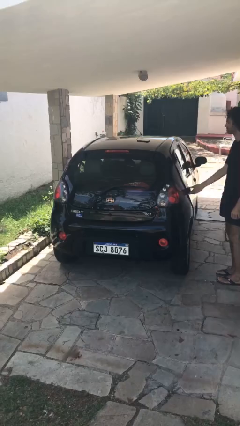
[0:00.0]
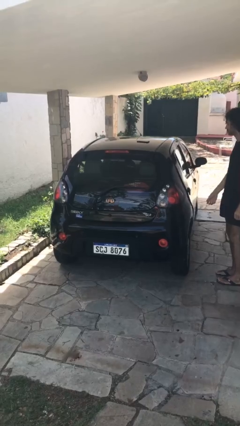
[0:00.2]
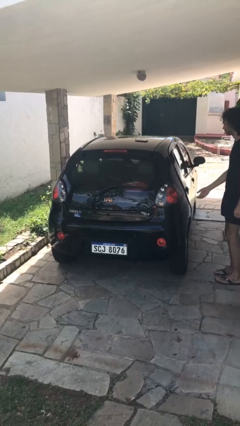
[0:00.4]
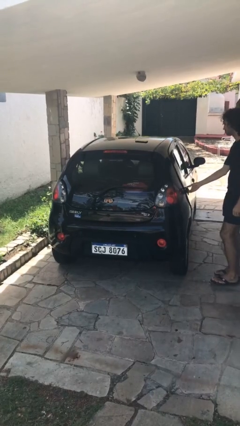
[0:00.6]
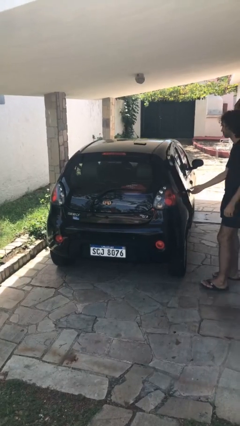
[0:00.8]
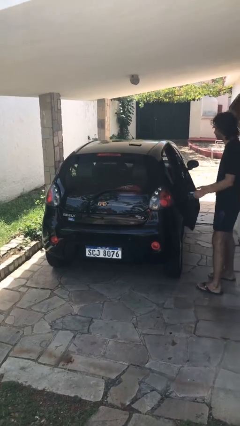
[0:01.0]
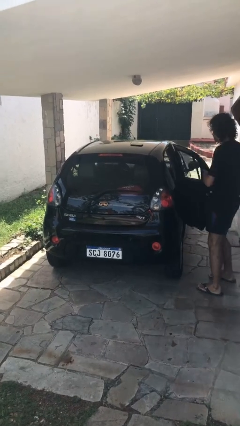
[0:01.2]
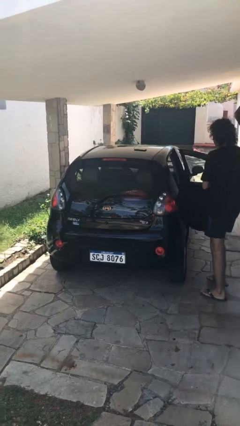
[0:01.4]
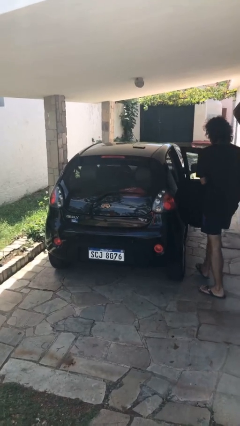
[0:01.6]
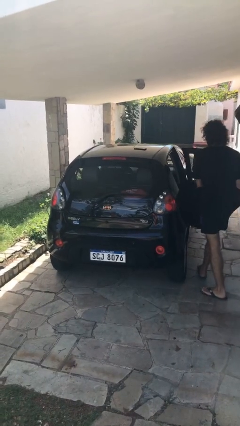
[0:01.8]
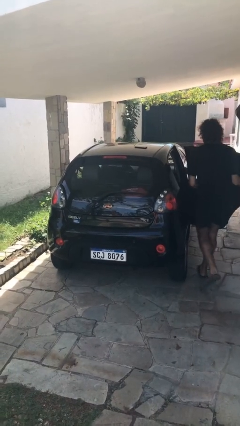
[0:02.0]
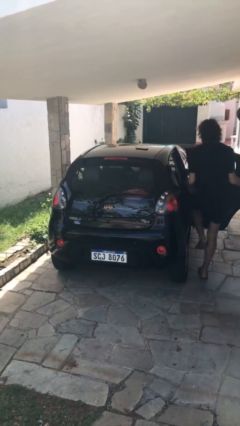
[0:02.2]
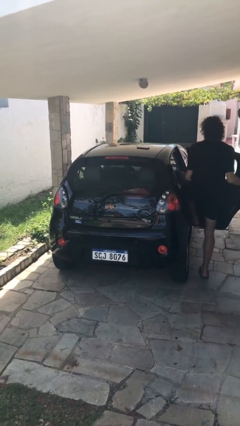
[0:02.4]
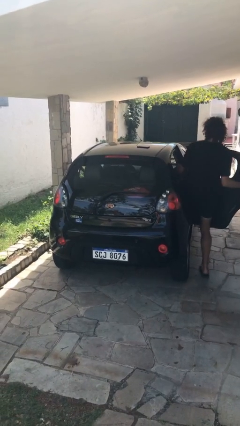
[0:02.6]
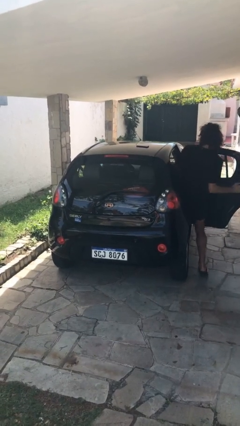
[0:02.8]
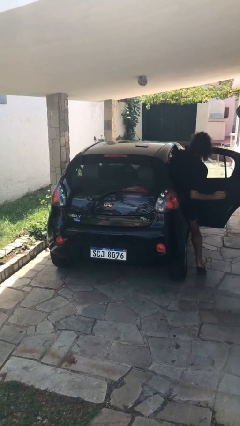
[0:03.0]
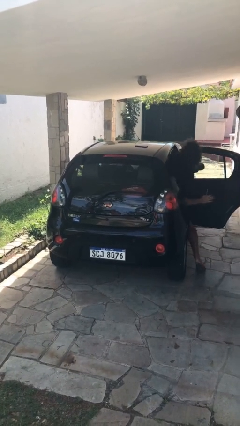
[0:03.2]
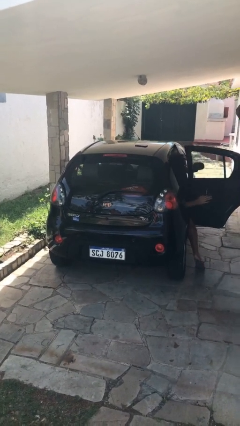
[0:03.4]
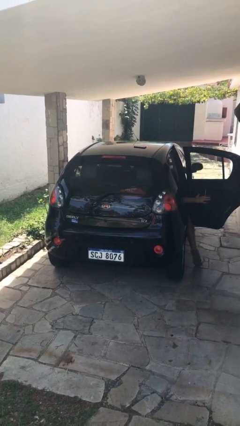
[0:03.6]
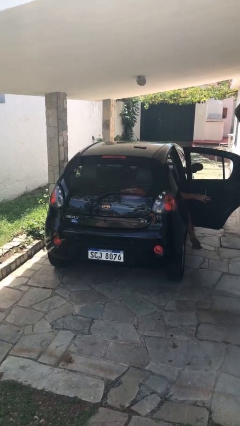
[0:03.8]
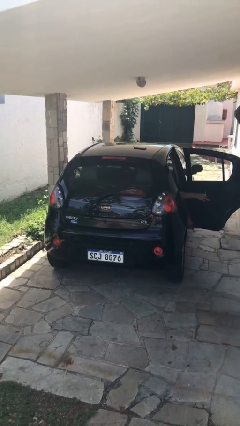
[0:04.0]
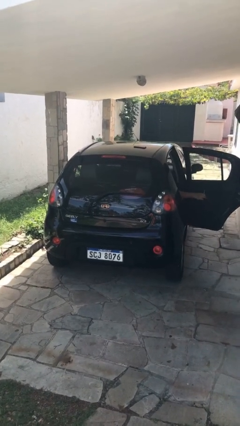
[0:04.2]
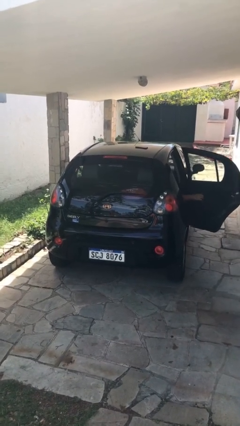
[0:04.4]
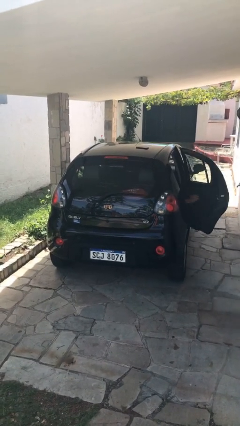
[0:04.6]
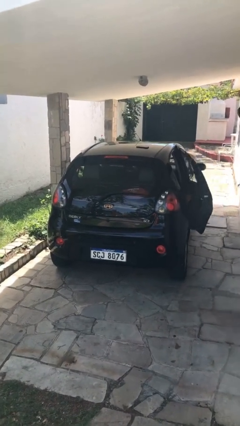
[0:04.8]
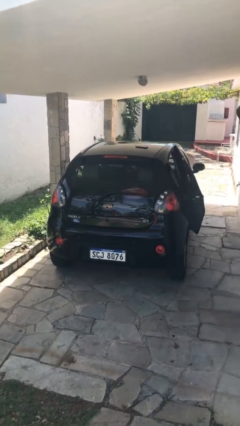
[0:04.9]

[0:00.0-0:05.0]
car picks up person

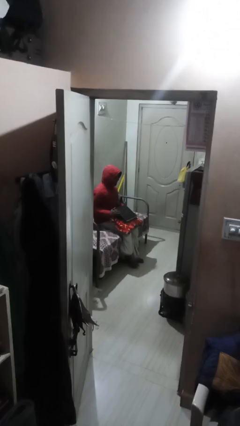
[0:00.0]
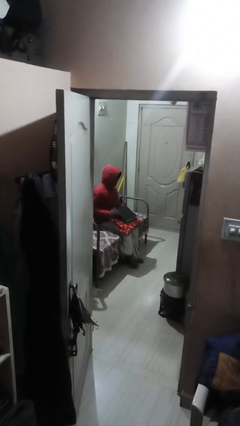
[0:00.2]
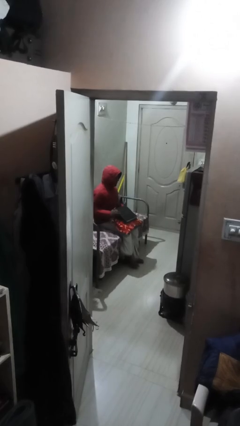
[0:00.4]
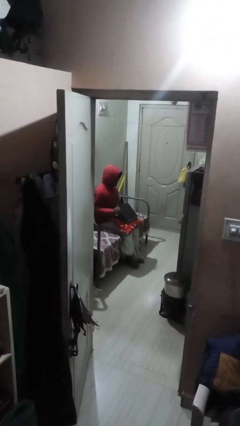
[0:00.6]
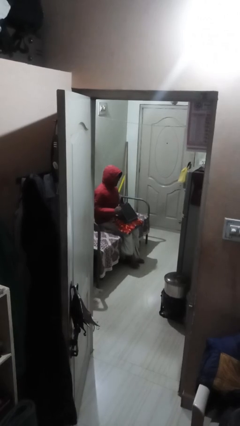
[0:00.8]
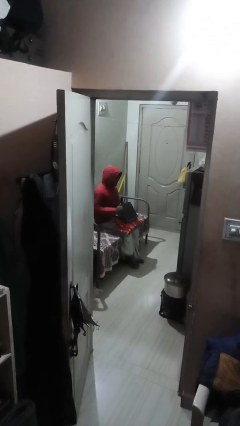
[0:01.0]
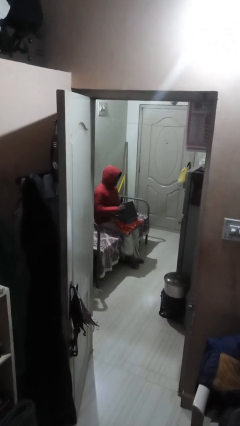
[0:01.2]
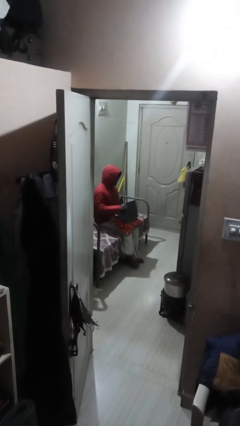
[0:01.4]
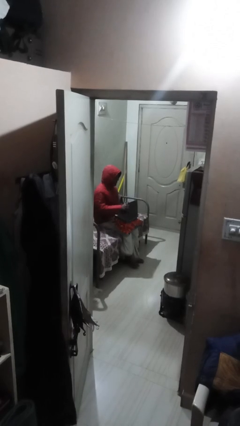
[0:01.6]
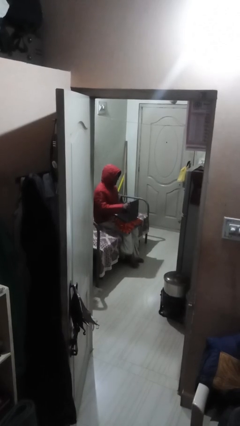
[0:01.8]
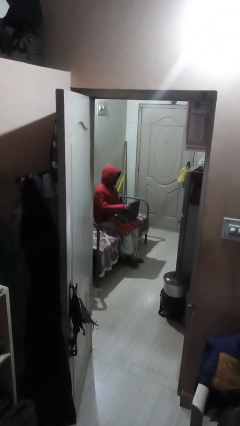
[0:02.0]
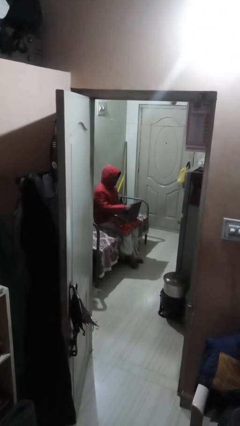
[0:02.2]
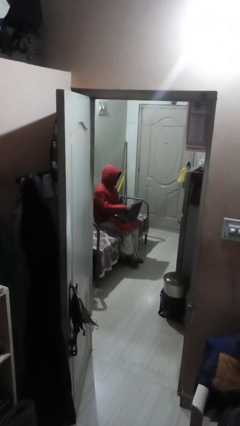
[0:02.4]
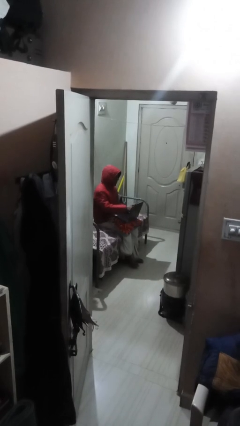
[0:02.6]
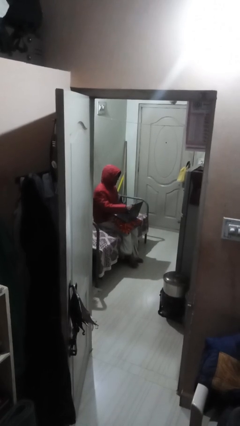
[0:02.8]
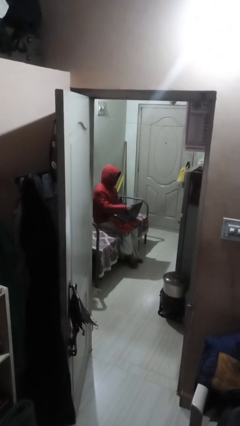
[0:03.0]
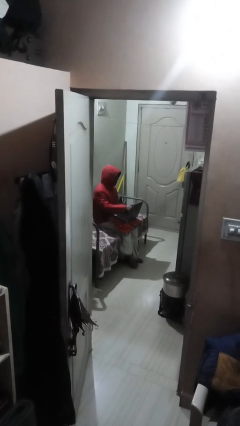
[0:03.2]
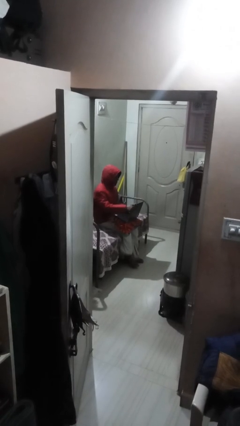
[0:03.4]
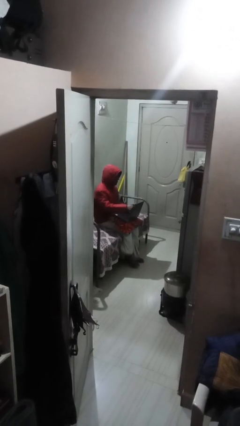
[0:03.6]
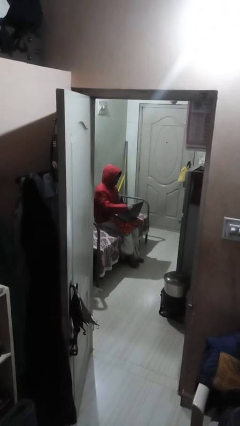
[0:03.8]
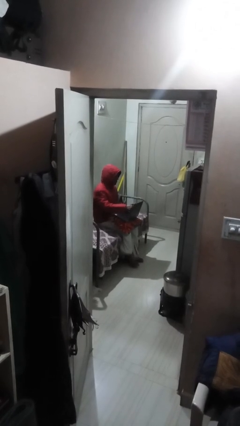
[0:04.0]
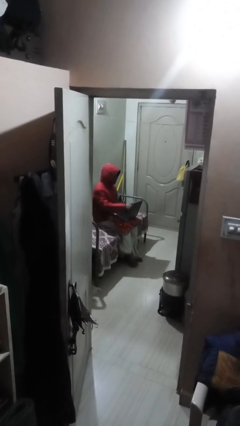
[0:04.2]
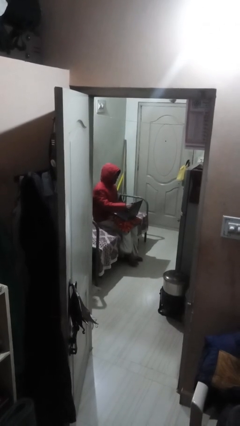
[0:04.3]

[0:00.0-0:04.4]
person interacts with laptop

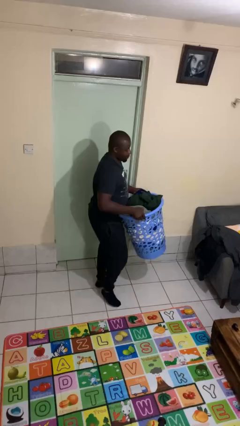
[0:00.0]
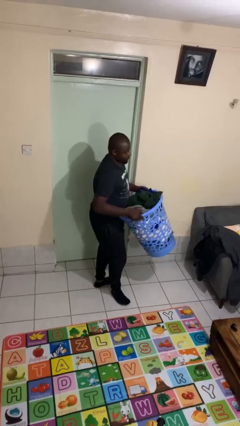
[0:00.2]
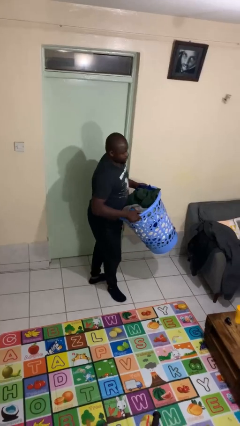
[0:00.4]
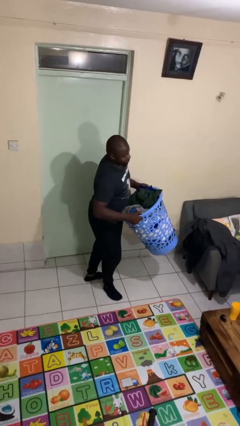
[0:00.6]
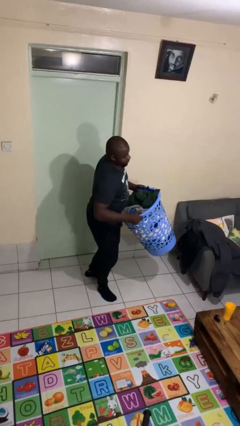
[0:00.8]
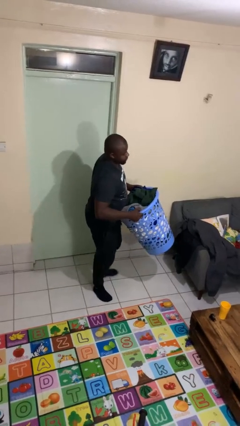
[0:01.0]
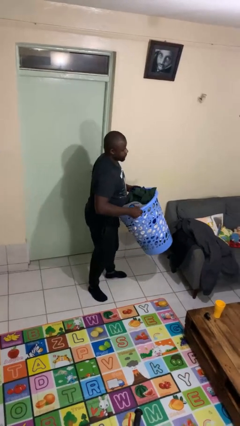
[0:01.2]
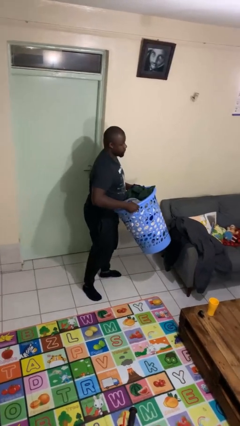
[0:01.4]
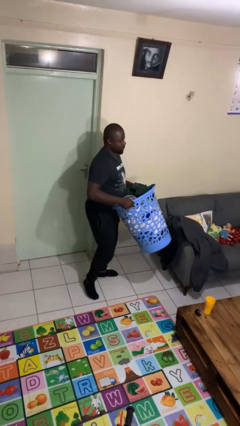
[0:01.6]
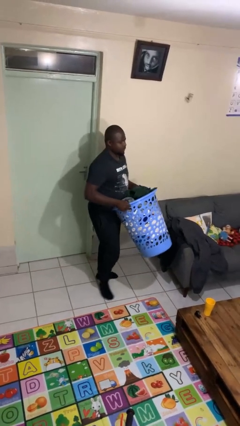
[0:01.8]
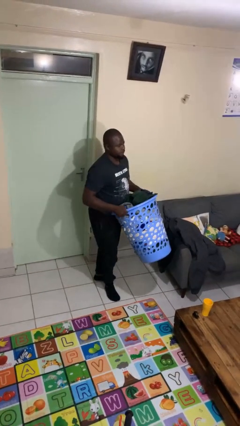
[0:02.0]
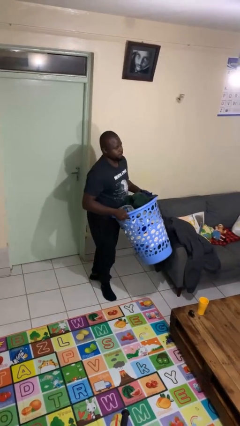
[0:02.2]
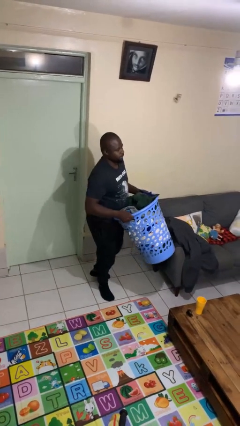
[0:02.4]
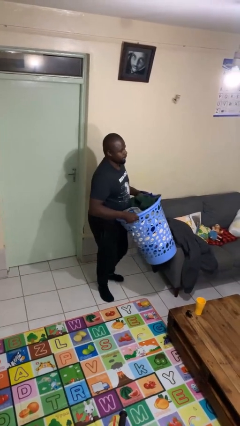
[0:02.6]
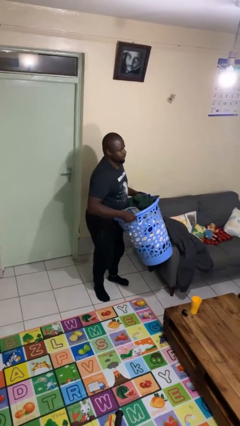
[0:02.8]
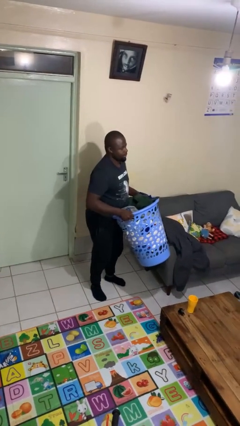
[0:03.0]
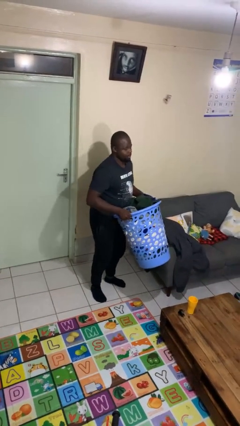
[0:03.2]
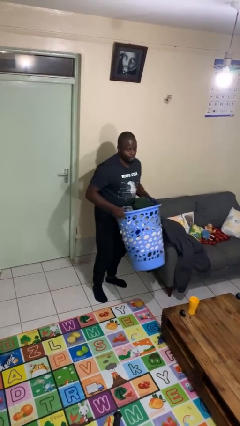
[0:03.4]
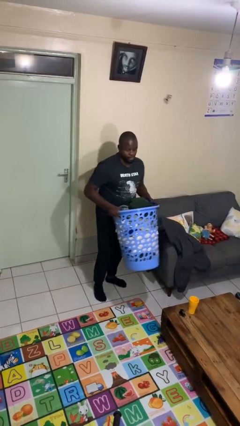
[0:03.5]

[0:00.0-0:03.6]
person carries laundry basket

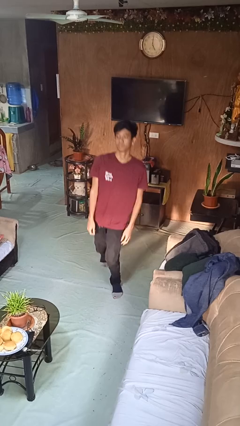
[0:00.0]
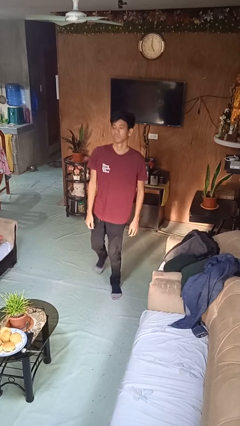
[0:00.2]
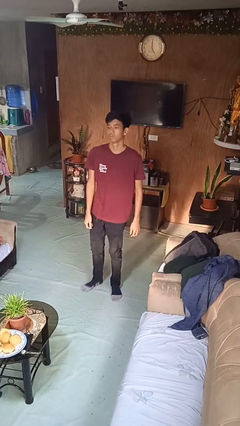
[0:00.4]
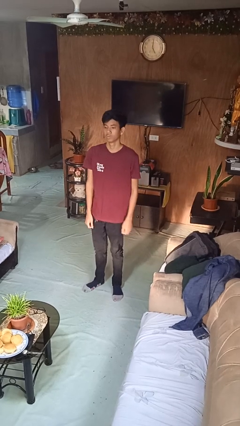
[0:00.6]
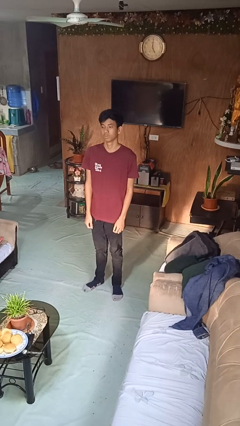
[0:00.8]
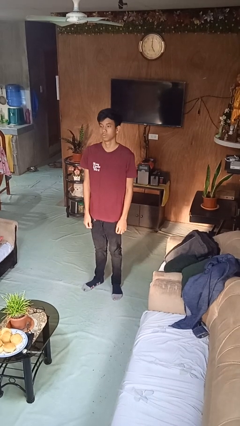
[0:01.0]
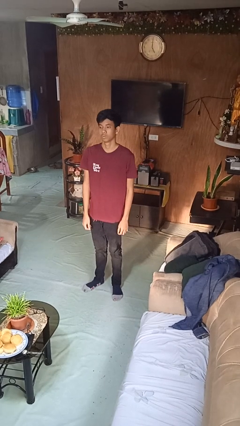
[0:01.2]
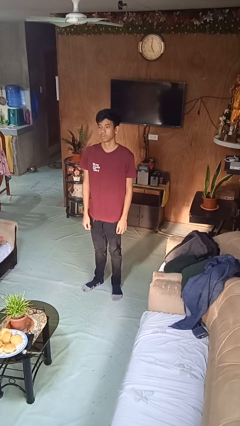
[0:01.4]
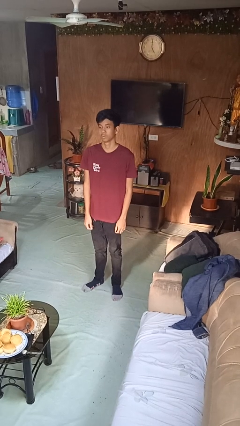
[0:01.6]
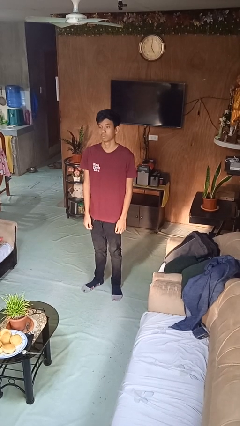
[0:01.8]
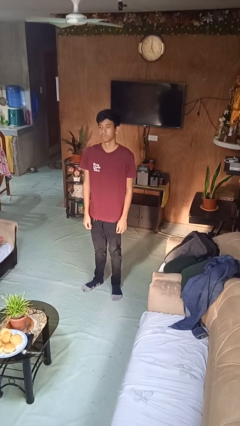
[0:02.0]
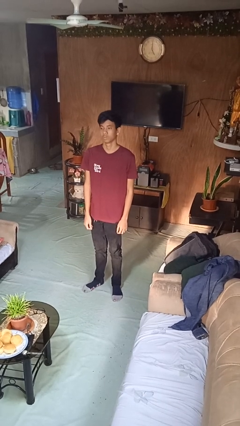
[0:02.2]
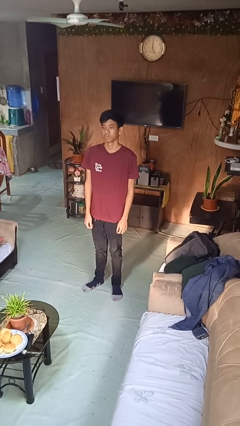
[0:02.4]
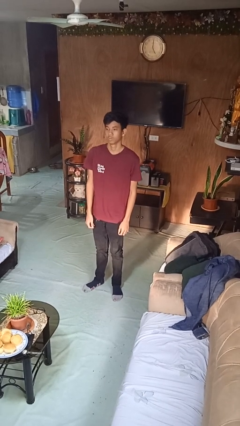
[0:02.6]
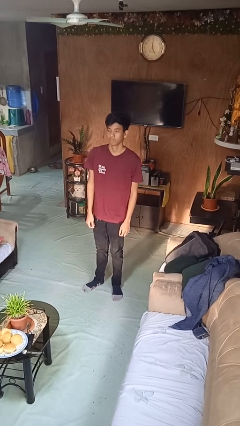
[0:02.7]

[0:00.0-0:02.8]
person stands up from floor

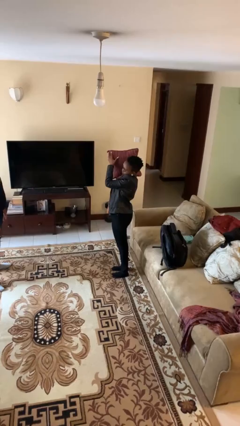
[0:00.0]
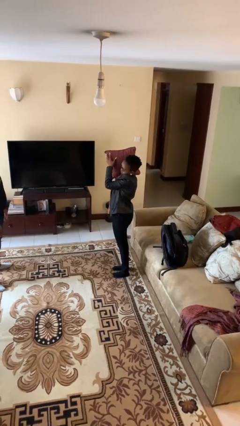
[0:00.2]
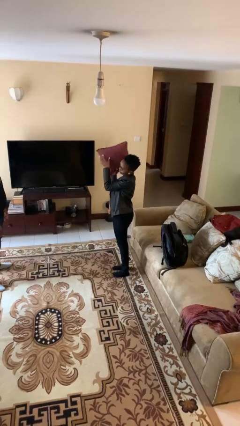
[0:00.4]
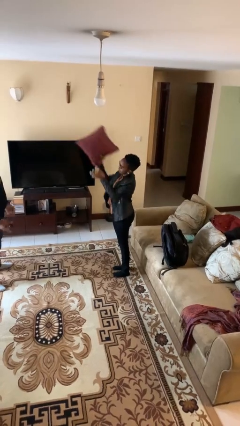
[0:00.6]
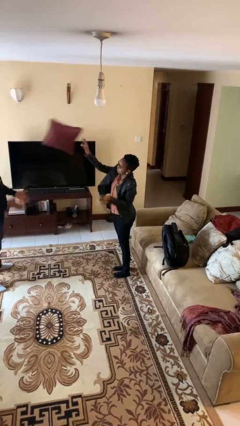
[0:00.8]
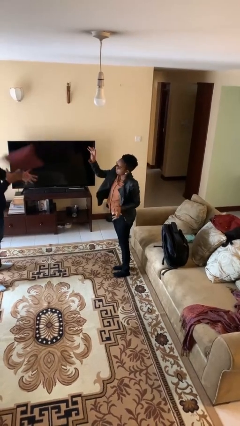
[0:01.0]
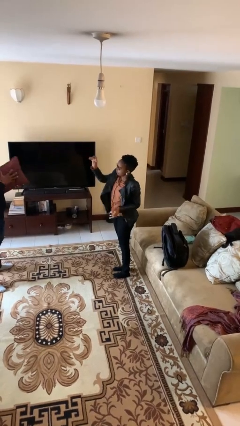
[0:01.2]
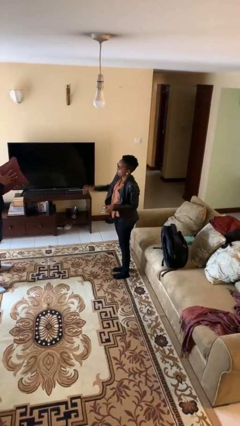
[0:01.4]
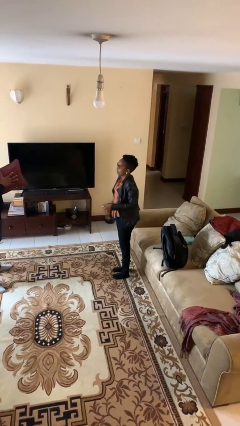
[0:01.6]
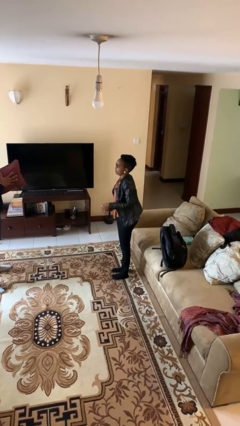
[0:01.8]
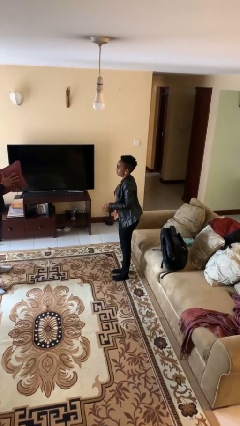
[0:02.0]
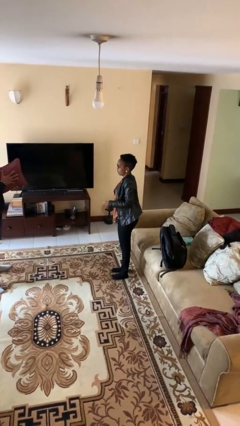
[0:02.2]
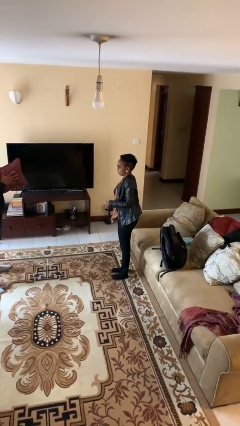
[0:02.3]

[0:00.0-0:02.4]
person throws object to person
